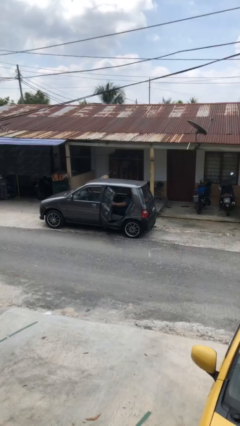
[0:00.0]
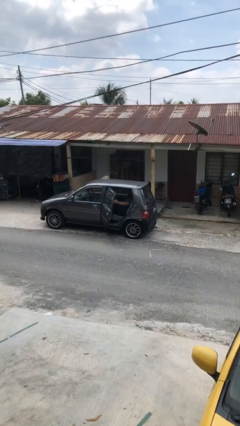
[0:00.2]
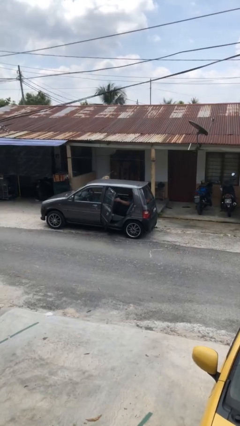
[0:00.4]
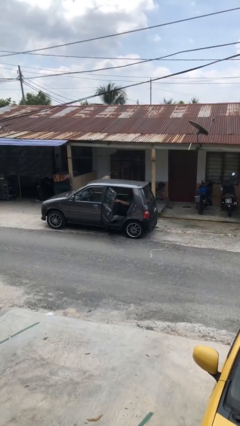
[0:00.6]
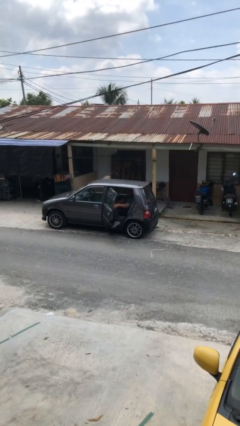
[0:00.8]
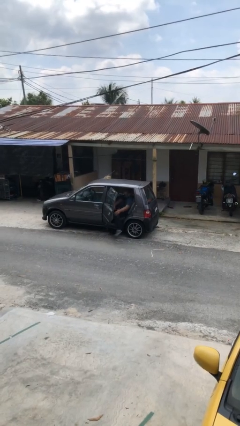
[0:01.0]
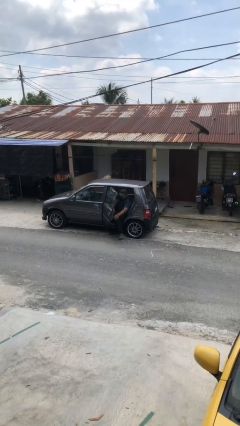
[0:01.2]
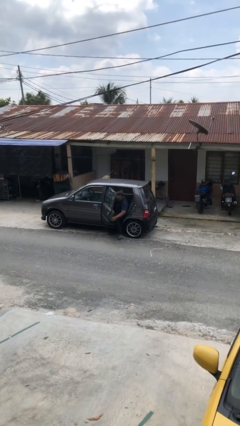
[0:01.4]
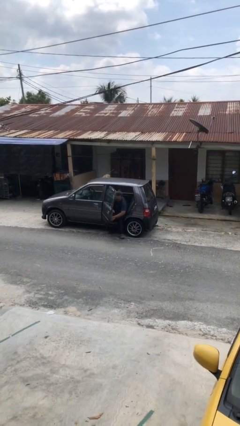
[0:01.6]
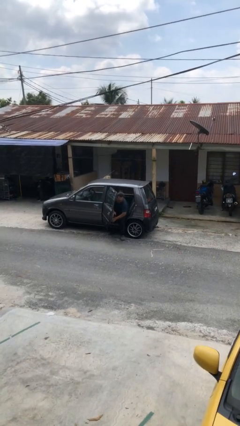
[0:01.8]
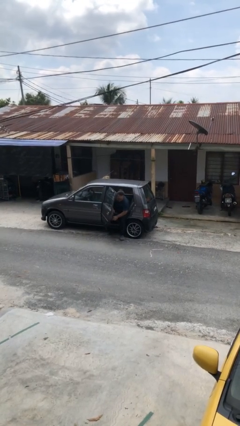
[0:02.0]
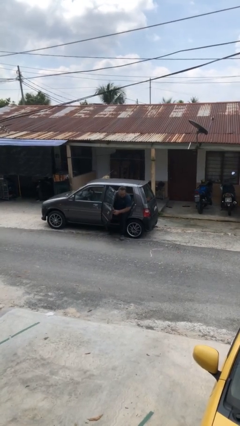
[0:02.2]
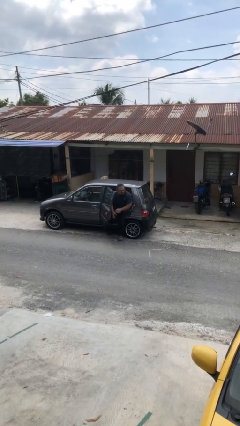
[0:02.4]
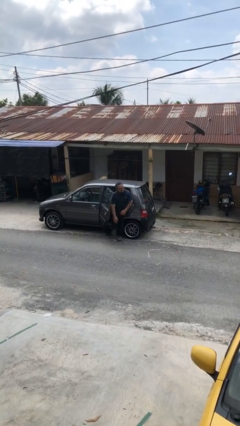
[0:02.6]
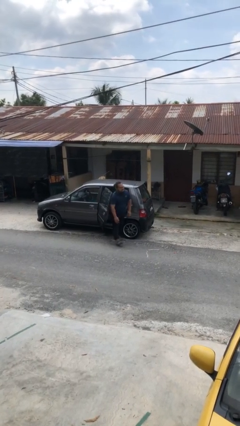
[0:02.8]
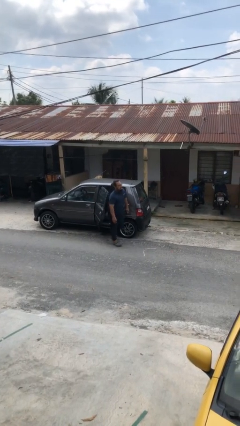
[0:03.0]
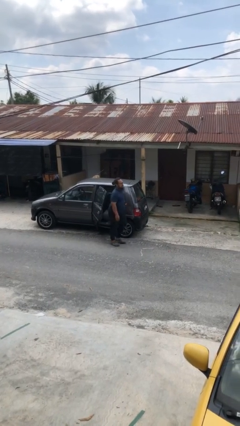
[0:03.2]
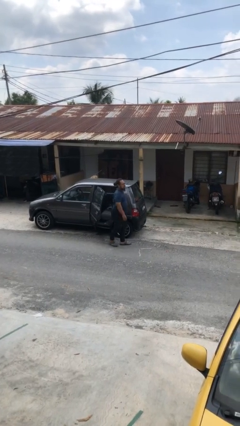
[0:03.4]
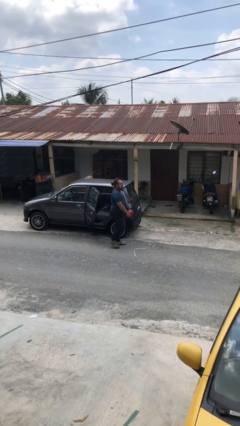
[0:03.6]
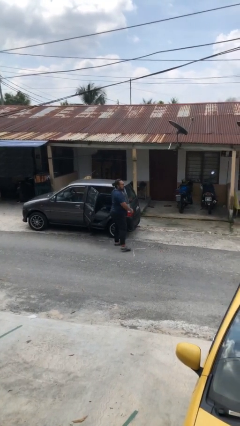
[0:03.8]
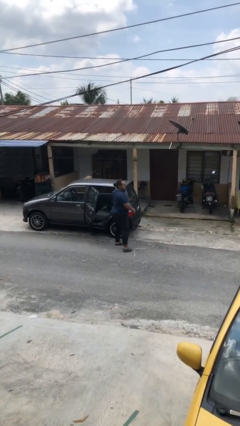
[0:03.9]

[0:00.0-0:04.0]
person exits car

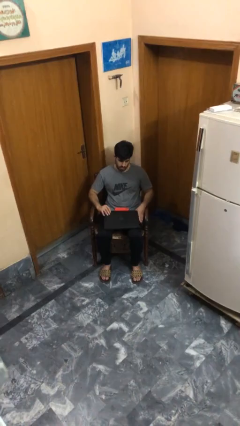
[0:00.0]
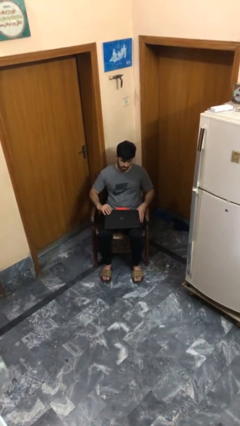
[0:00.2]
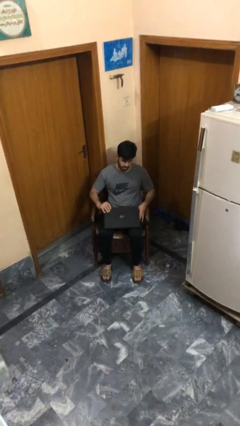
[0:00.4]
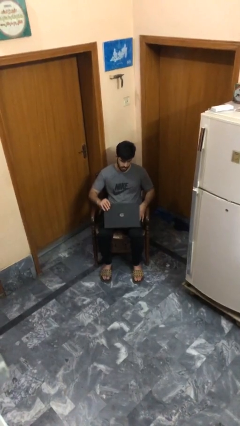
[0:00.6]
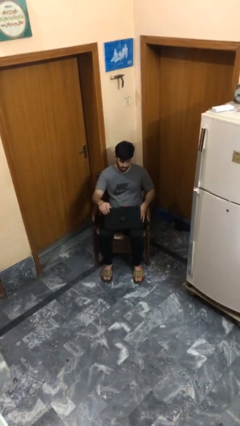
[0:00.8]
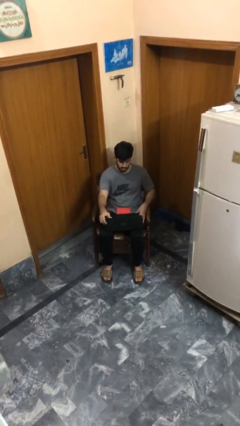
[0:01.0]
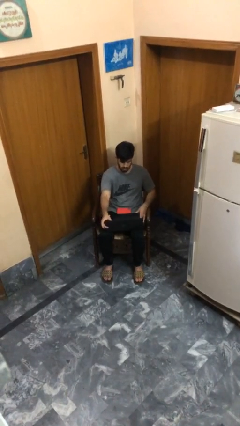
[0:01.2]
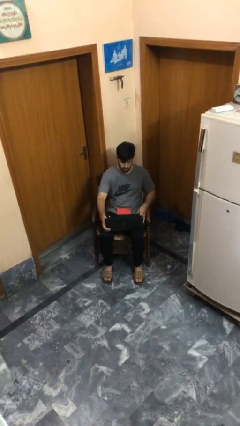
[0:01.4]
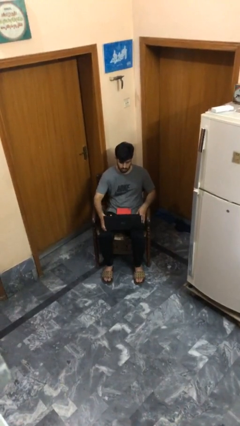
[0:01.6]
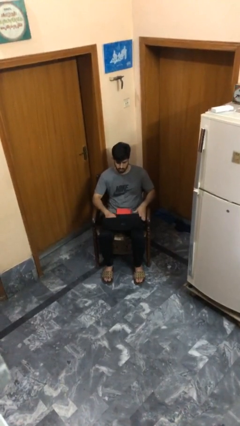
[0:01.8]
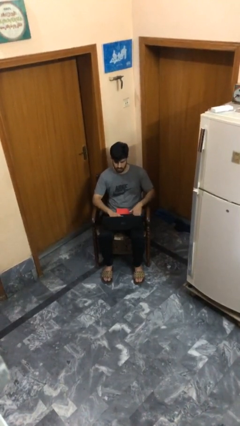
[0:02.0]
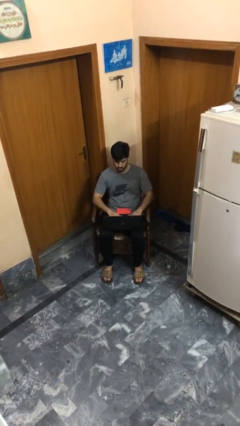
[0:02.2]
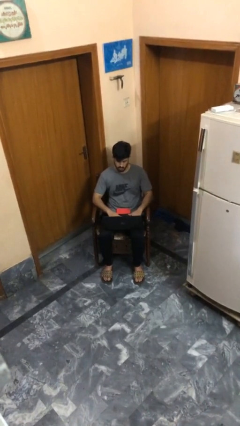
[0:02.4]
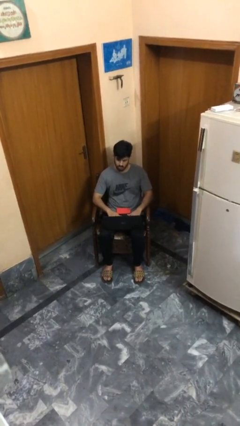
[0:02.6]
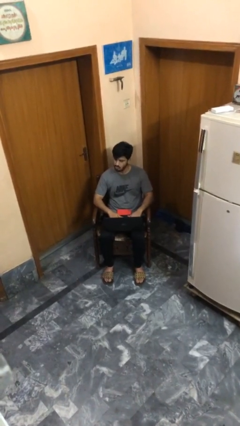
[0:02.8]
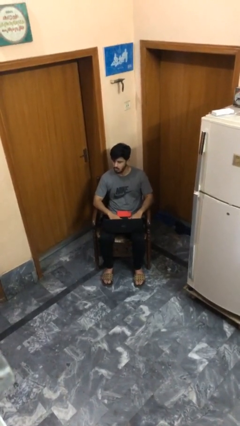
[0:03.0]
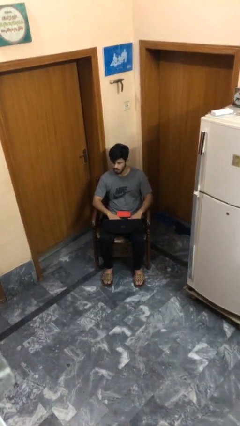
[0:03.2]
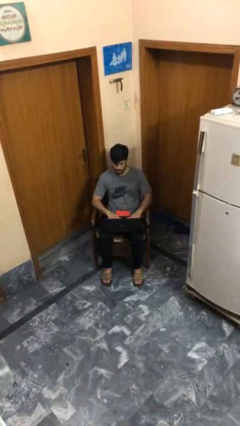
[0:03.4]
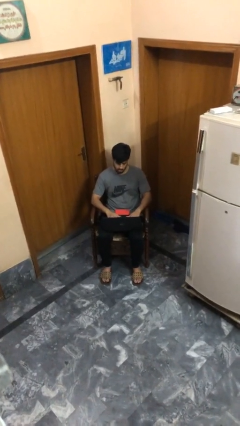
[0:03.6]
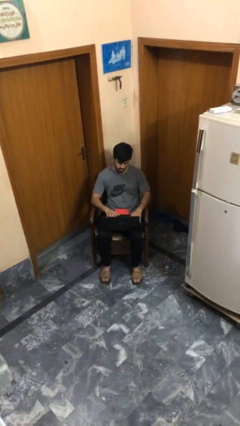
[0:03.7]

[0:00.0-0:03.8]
person opens laptop

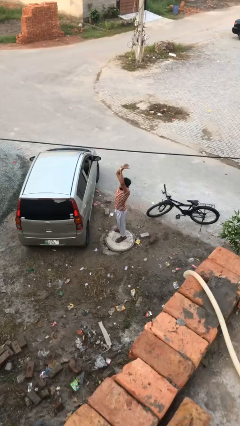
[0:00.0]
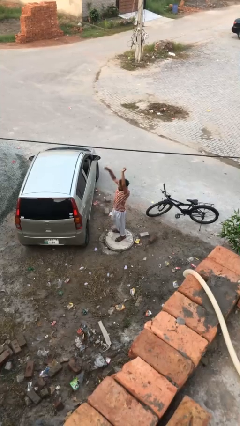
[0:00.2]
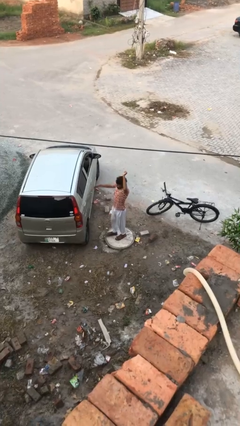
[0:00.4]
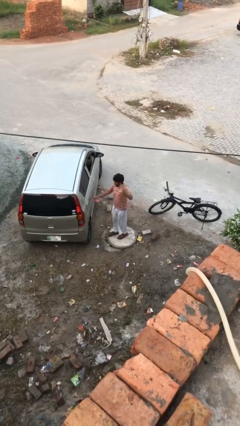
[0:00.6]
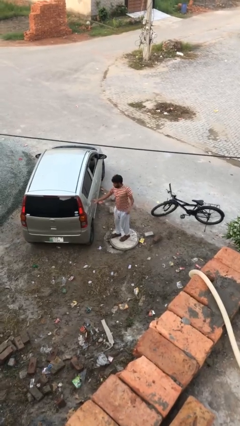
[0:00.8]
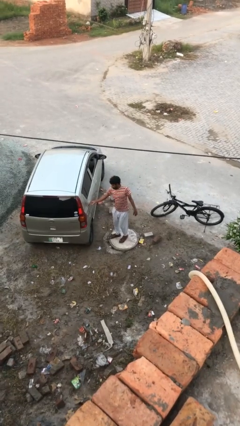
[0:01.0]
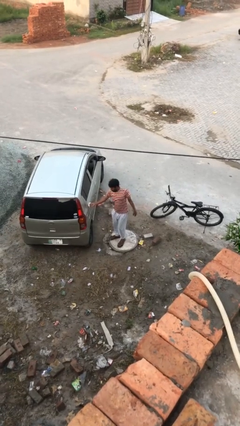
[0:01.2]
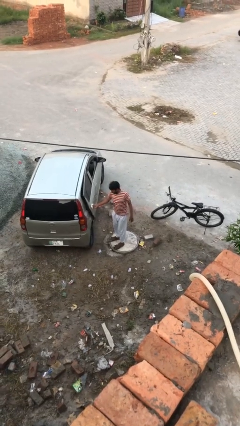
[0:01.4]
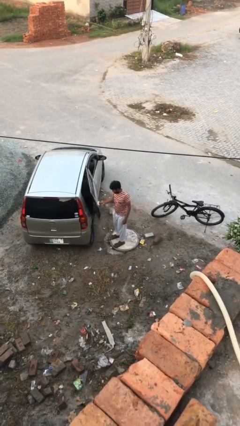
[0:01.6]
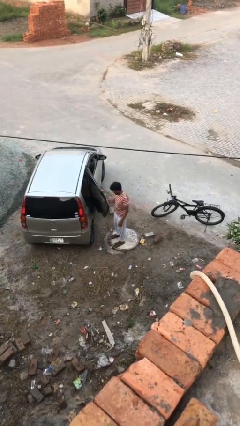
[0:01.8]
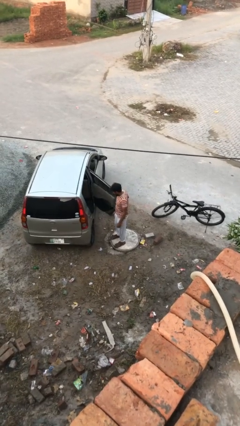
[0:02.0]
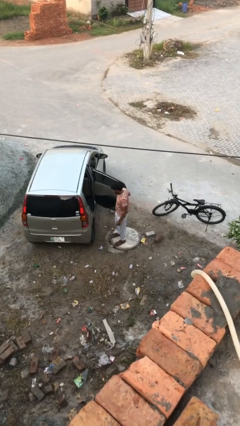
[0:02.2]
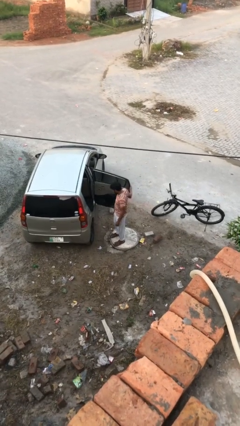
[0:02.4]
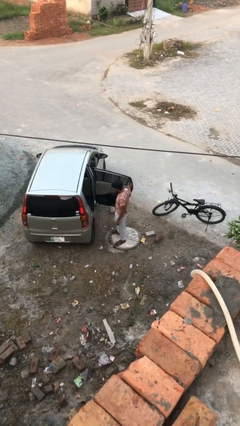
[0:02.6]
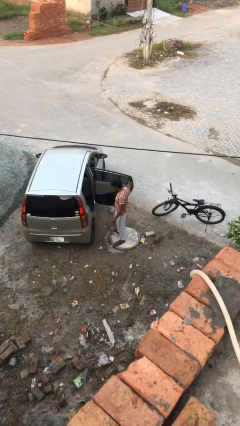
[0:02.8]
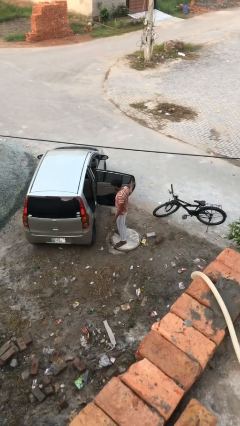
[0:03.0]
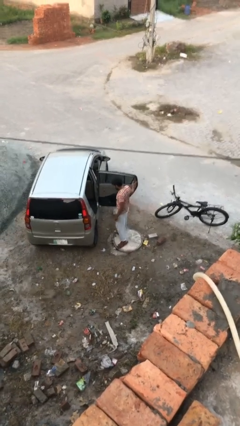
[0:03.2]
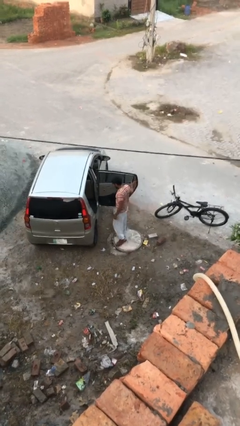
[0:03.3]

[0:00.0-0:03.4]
person opens car door

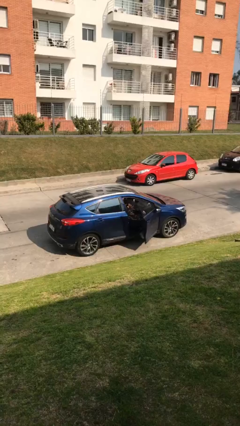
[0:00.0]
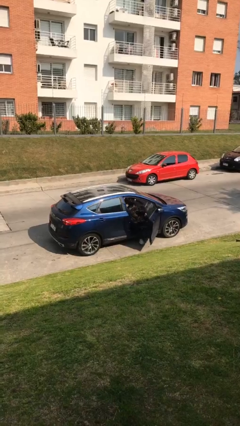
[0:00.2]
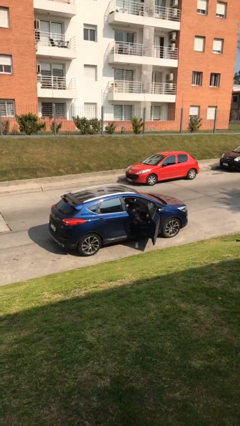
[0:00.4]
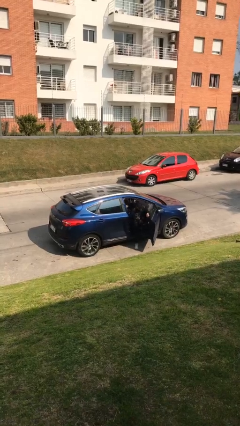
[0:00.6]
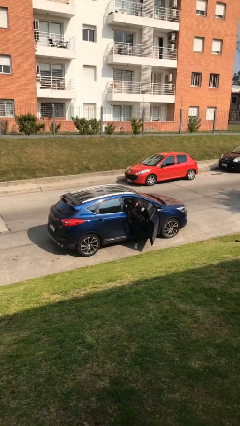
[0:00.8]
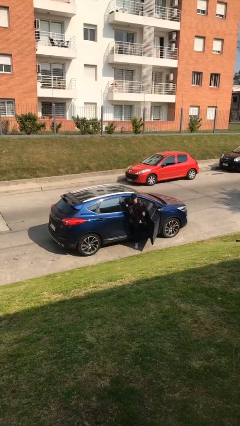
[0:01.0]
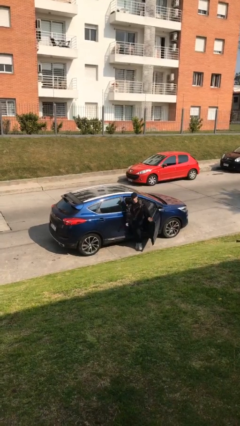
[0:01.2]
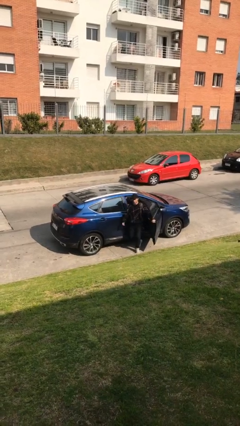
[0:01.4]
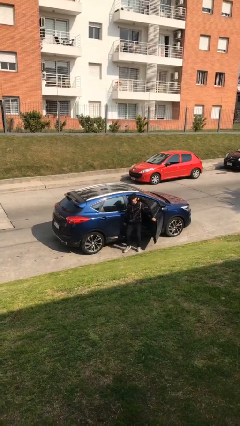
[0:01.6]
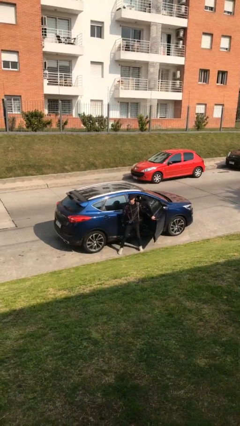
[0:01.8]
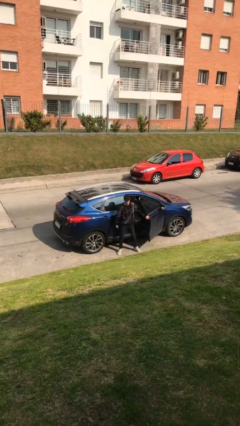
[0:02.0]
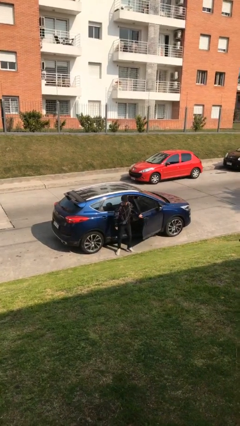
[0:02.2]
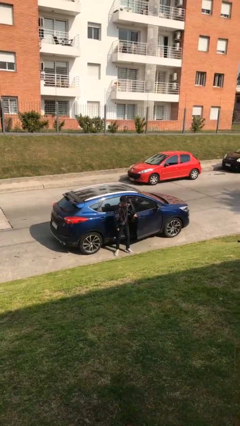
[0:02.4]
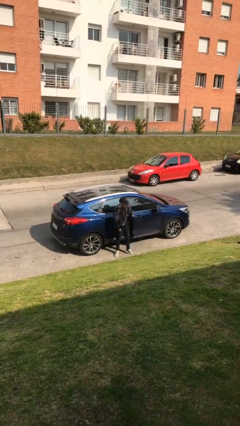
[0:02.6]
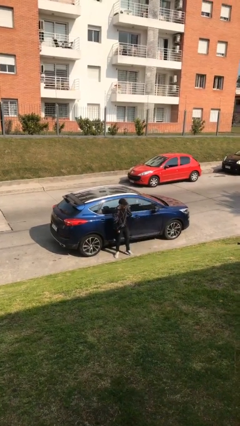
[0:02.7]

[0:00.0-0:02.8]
car drops off person

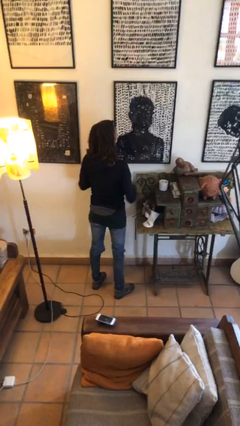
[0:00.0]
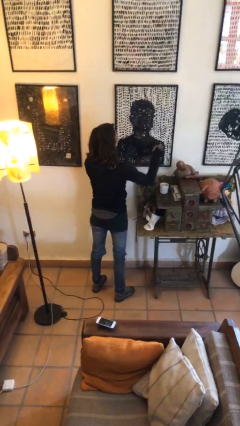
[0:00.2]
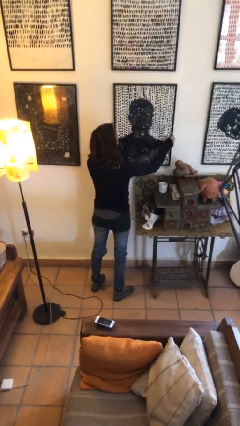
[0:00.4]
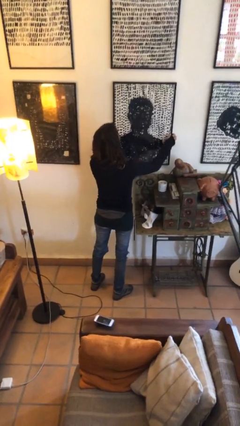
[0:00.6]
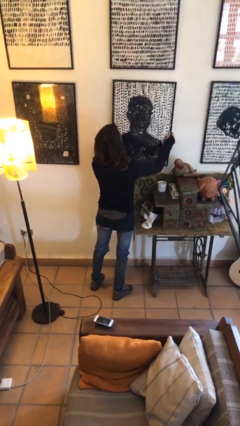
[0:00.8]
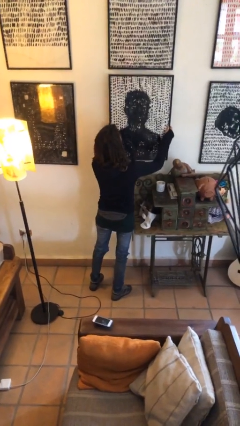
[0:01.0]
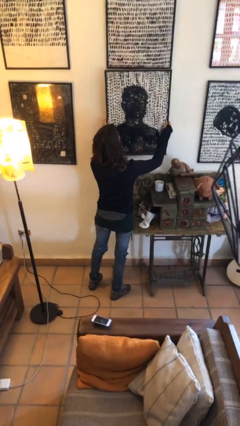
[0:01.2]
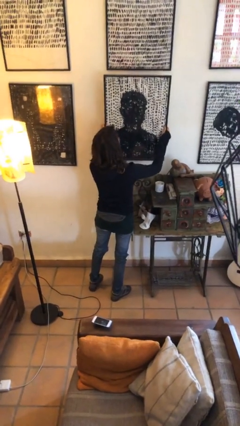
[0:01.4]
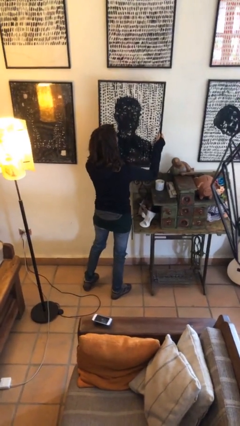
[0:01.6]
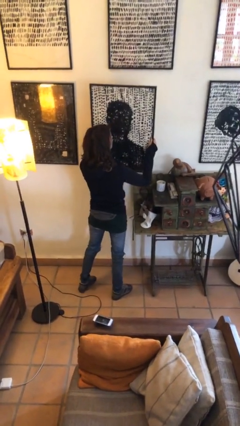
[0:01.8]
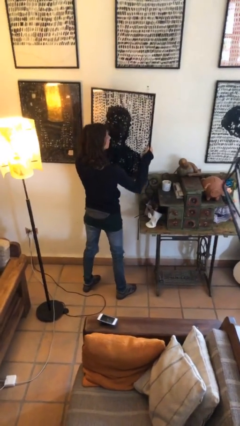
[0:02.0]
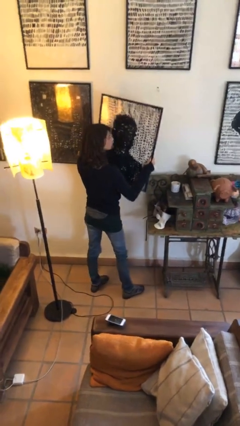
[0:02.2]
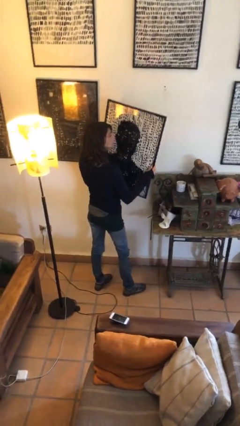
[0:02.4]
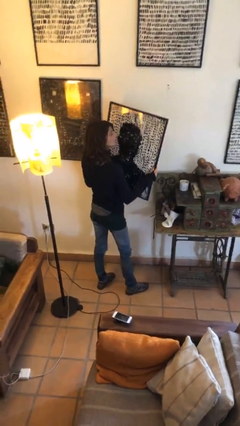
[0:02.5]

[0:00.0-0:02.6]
person takes down picture frame

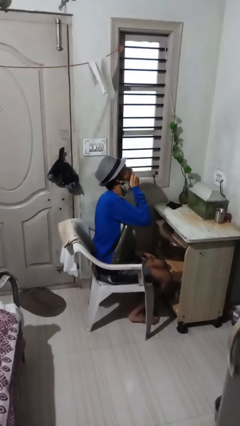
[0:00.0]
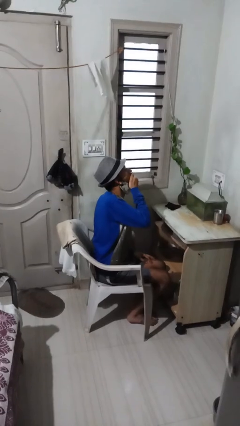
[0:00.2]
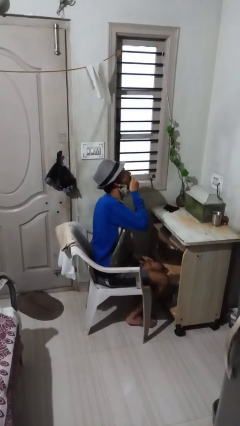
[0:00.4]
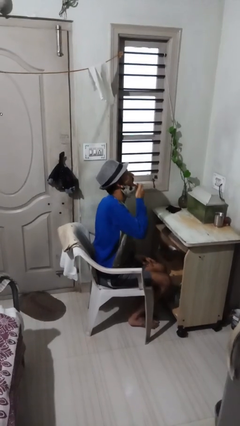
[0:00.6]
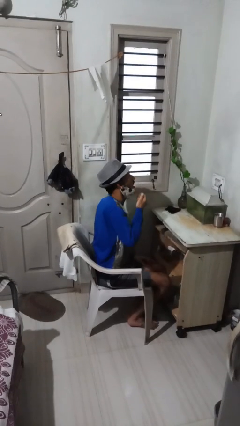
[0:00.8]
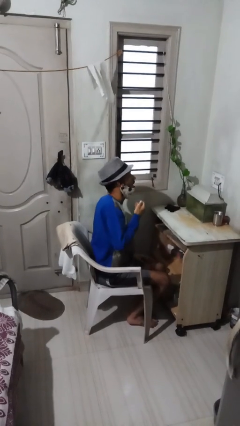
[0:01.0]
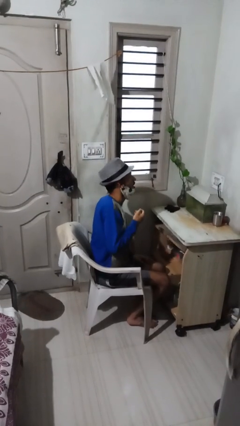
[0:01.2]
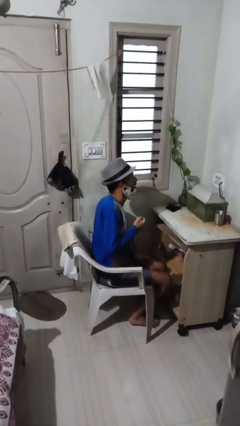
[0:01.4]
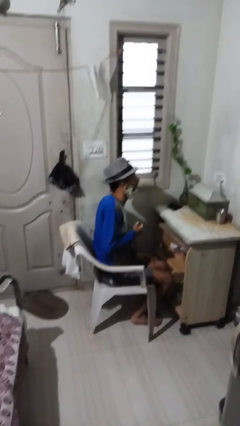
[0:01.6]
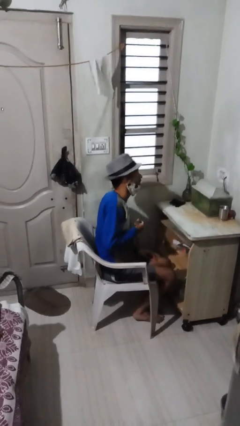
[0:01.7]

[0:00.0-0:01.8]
person yawns
